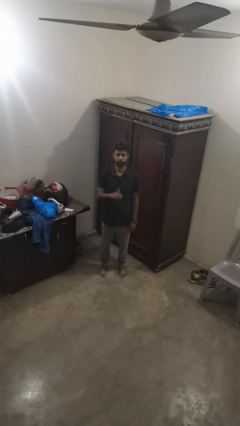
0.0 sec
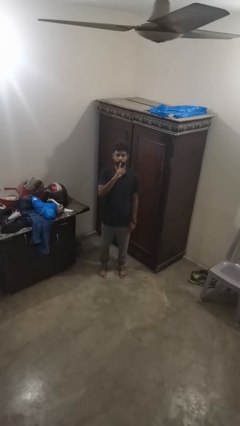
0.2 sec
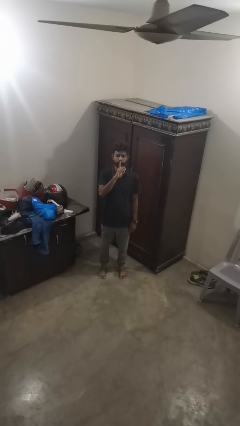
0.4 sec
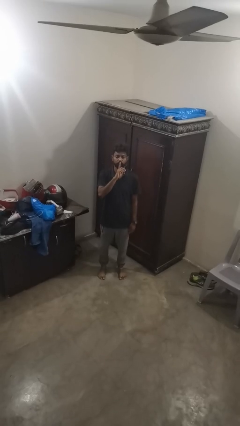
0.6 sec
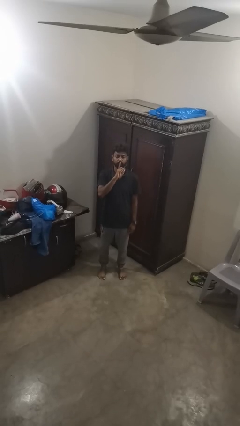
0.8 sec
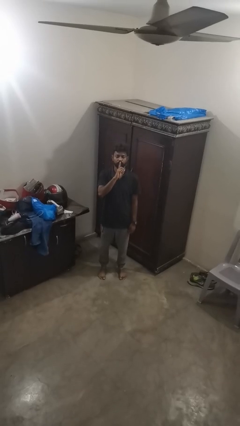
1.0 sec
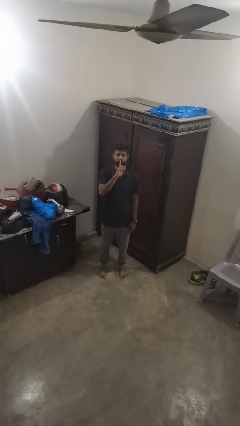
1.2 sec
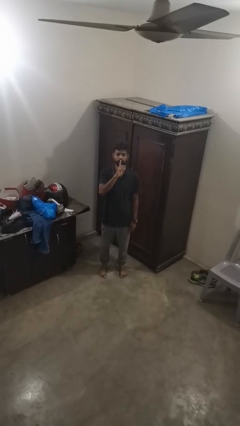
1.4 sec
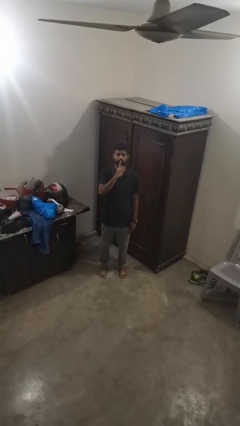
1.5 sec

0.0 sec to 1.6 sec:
person gestures be quiet

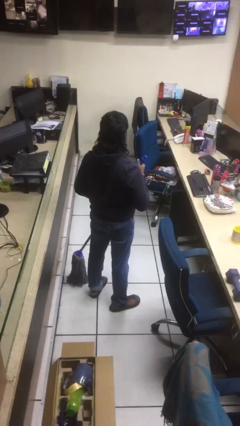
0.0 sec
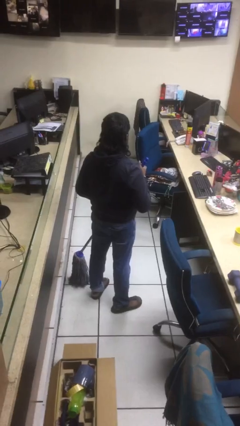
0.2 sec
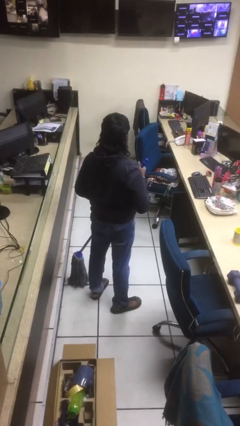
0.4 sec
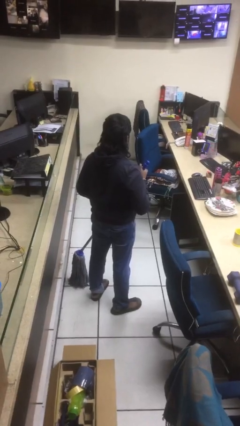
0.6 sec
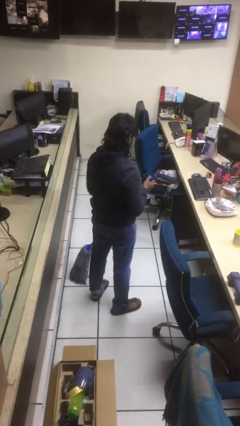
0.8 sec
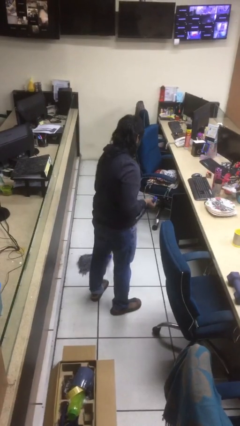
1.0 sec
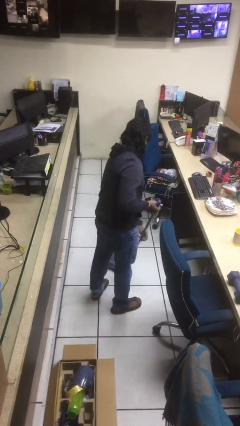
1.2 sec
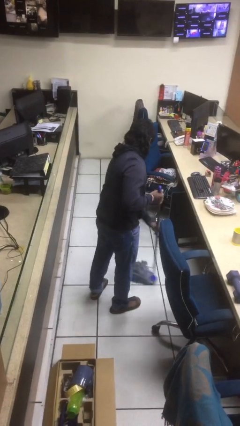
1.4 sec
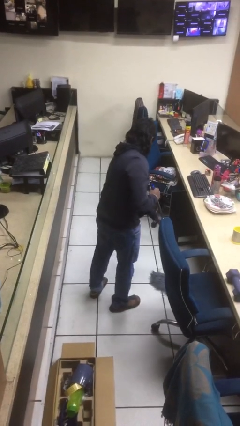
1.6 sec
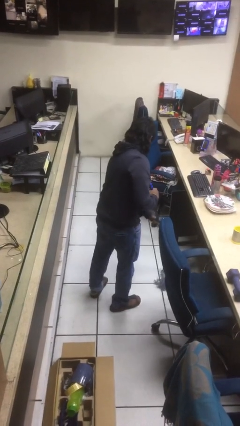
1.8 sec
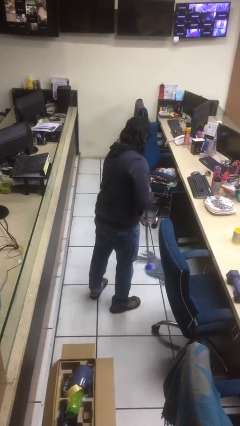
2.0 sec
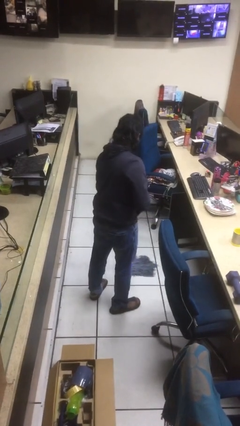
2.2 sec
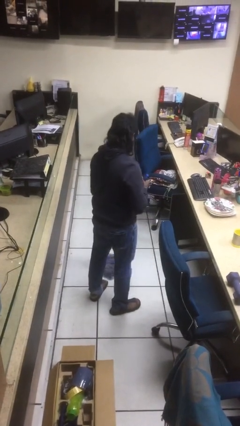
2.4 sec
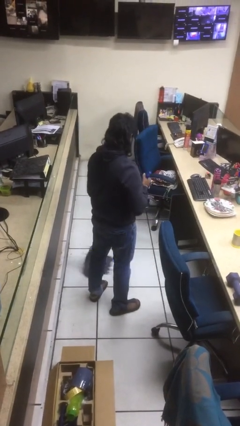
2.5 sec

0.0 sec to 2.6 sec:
person mops

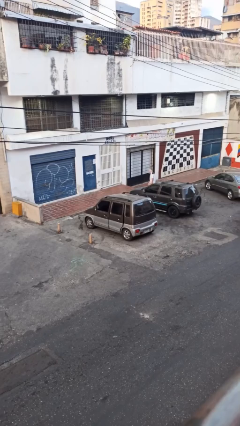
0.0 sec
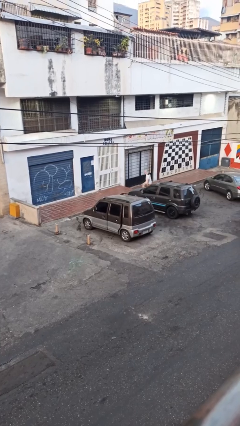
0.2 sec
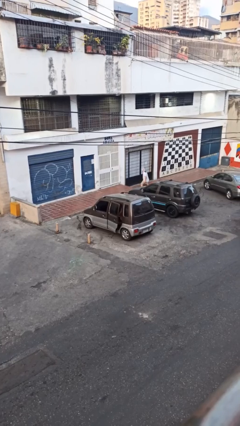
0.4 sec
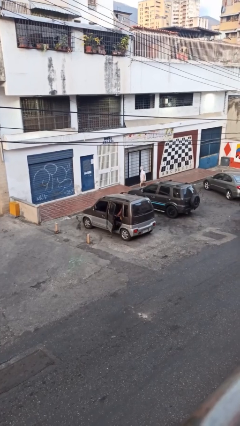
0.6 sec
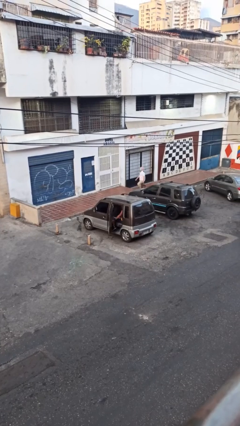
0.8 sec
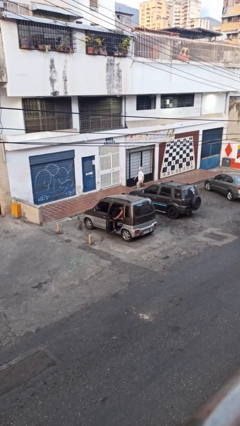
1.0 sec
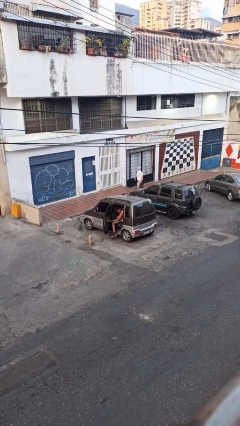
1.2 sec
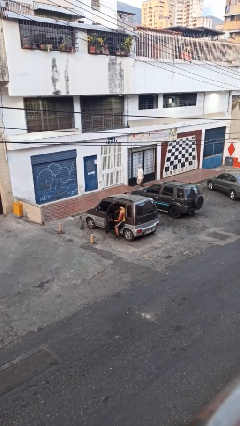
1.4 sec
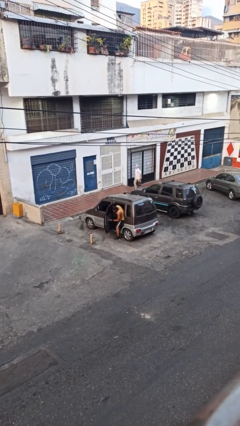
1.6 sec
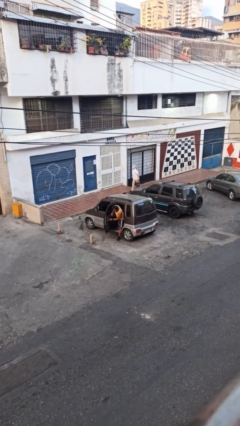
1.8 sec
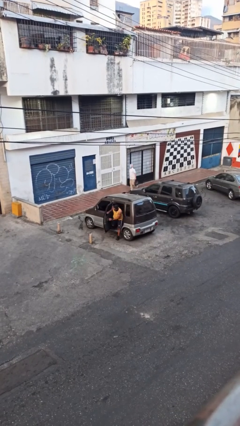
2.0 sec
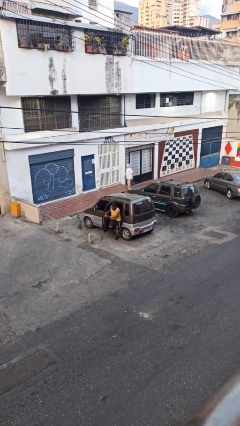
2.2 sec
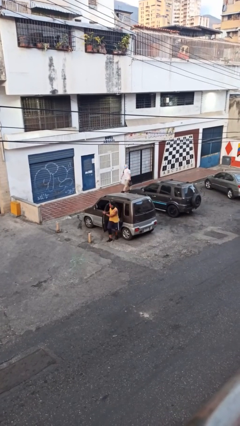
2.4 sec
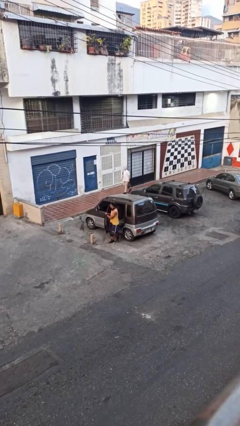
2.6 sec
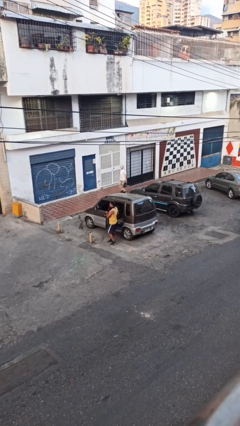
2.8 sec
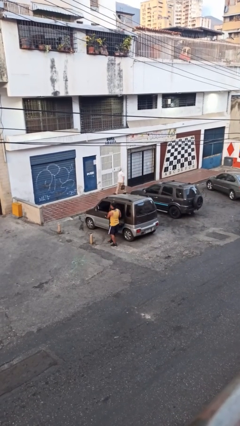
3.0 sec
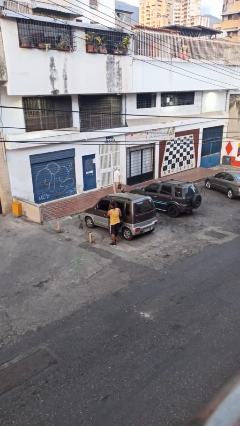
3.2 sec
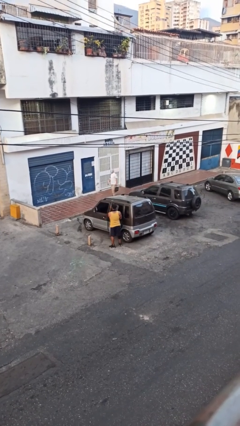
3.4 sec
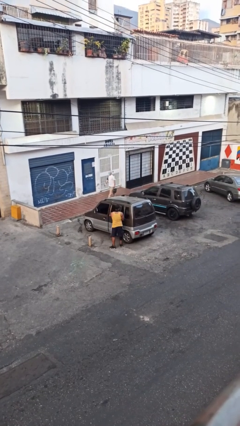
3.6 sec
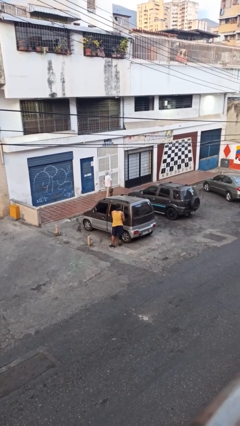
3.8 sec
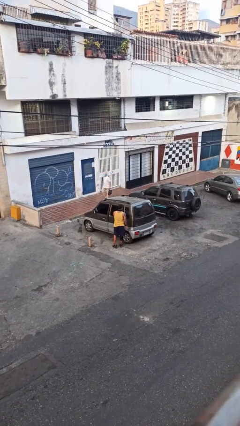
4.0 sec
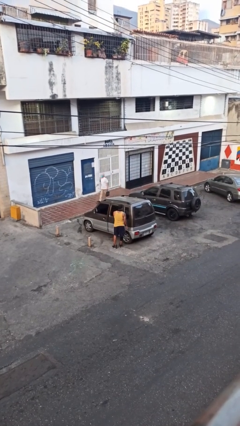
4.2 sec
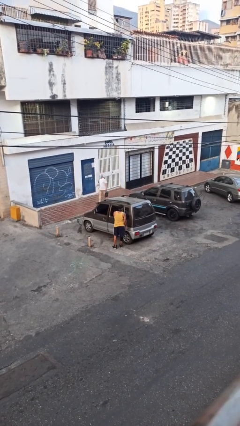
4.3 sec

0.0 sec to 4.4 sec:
car drops off person

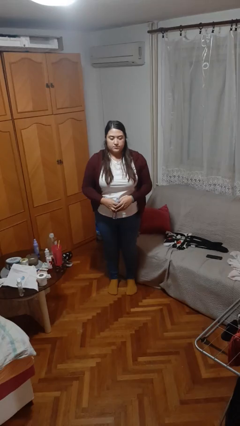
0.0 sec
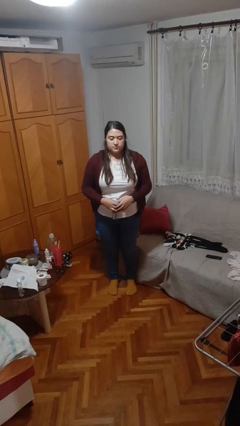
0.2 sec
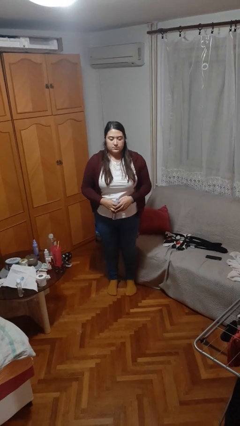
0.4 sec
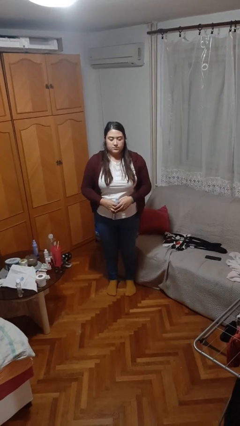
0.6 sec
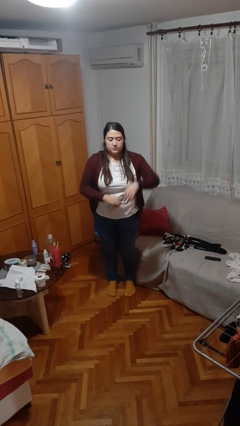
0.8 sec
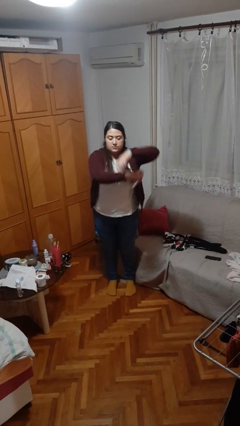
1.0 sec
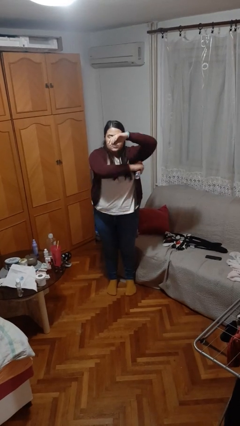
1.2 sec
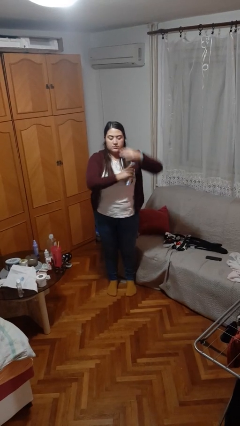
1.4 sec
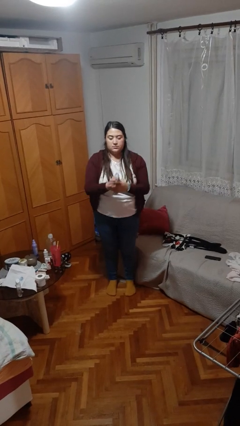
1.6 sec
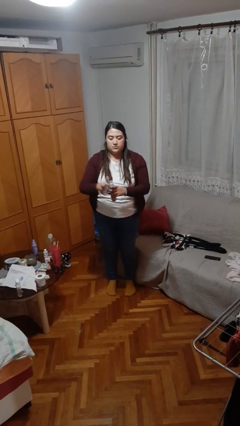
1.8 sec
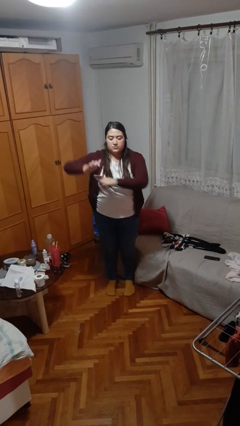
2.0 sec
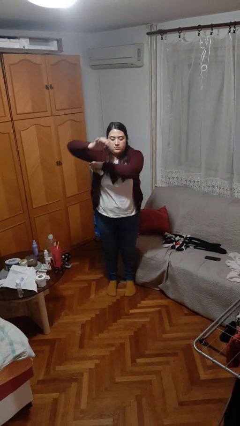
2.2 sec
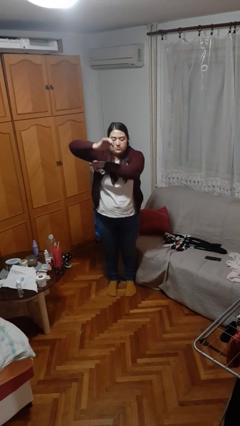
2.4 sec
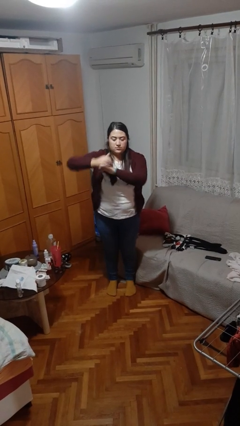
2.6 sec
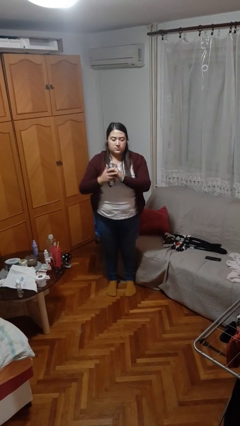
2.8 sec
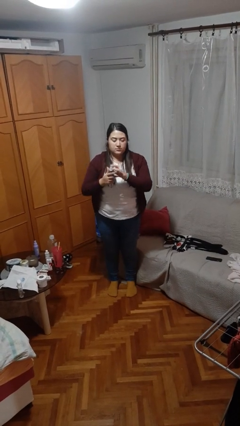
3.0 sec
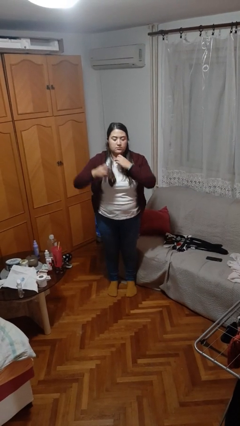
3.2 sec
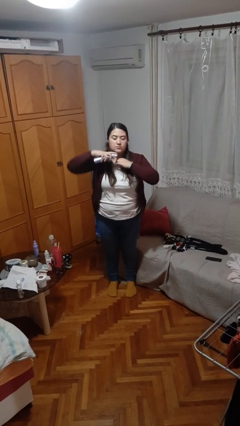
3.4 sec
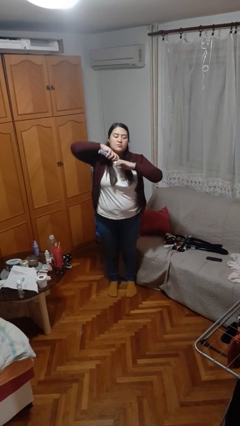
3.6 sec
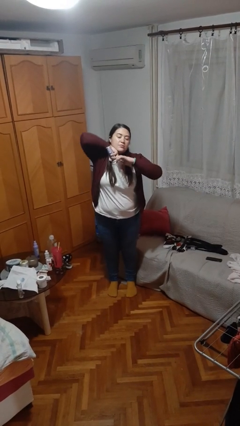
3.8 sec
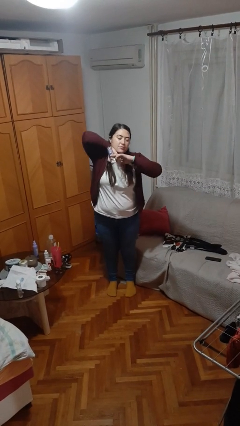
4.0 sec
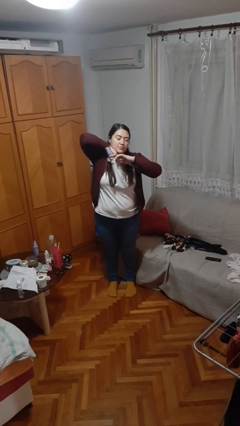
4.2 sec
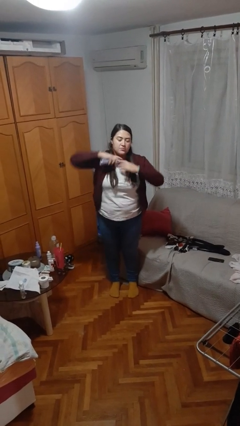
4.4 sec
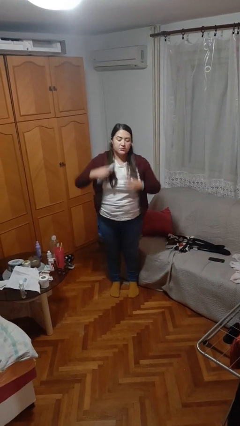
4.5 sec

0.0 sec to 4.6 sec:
person applies deodorant

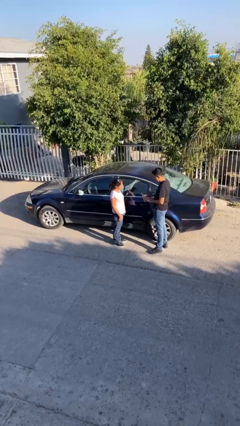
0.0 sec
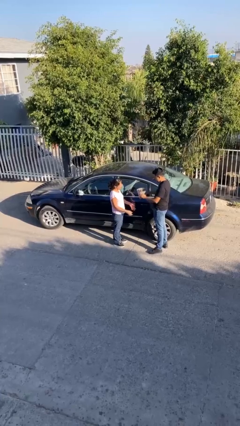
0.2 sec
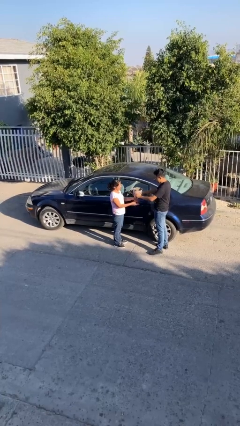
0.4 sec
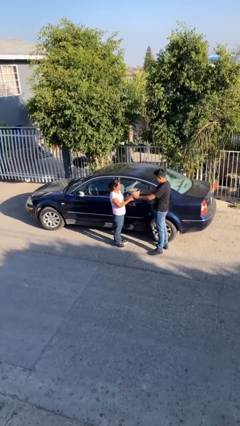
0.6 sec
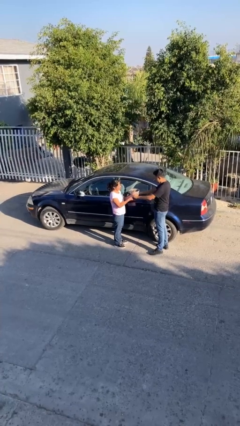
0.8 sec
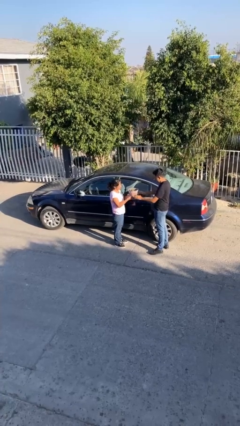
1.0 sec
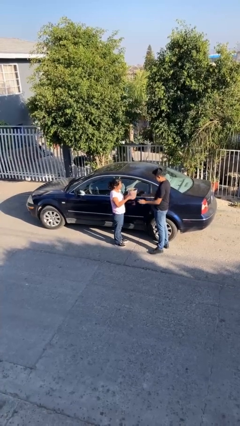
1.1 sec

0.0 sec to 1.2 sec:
person transfers object to person

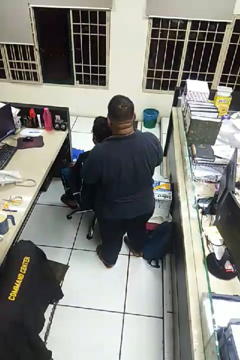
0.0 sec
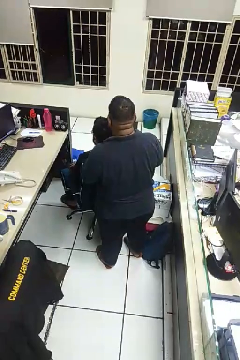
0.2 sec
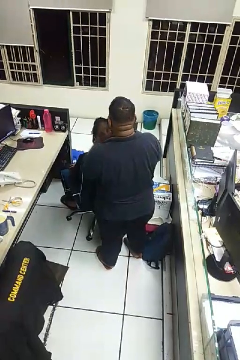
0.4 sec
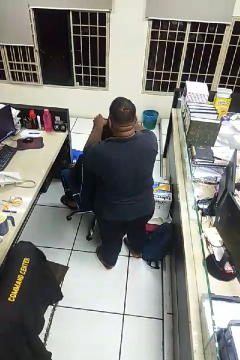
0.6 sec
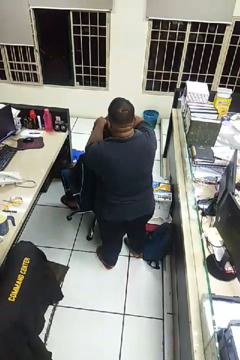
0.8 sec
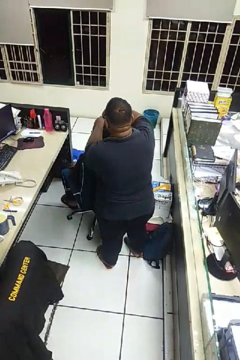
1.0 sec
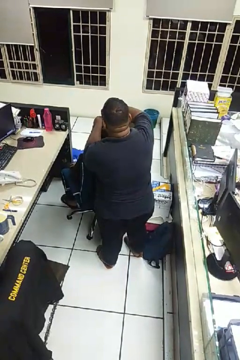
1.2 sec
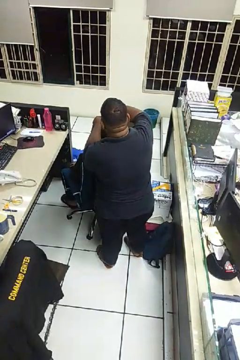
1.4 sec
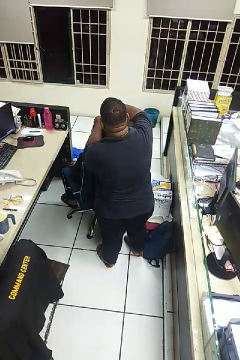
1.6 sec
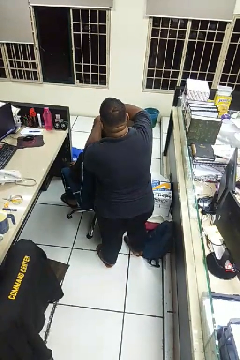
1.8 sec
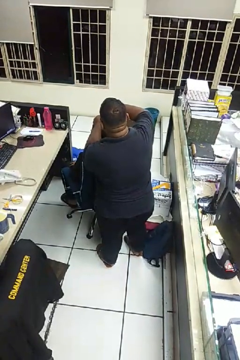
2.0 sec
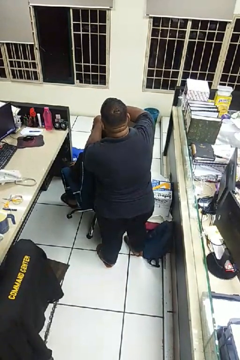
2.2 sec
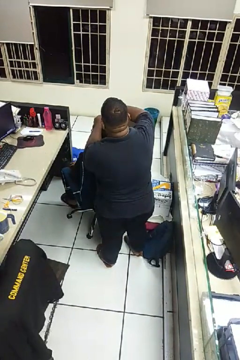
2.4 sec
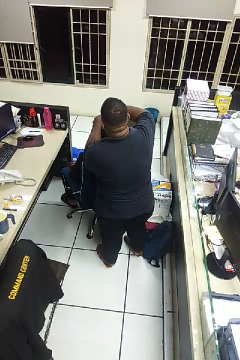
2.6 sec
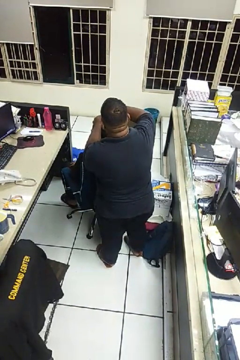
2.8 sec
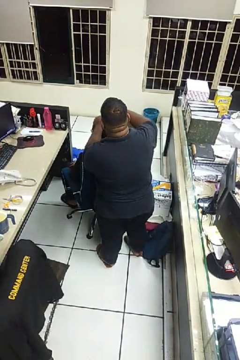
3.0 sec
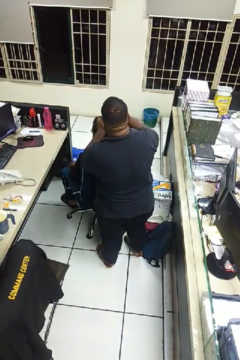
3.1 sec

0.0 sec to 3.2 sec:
person braids hair of person

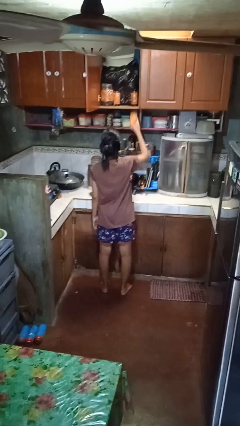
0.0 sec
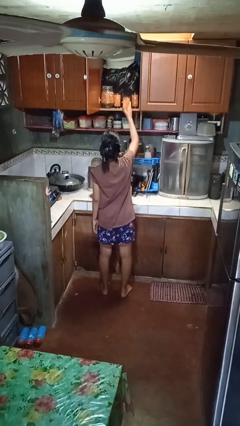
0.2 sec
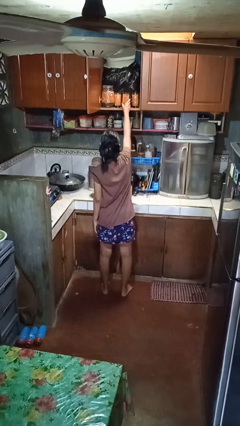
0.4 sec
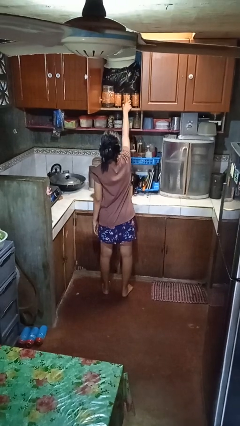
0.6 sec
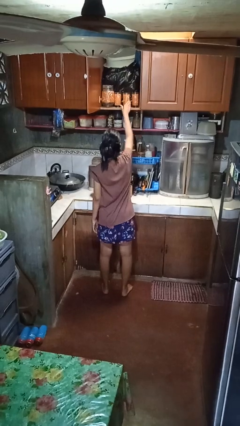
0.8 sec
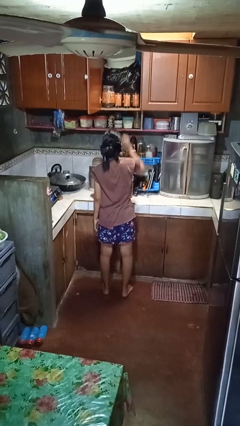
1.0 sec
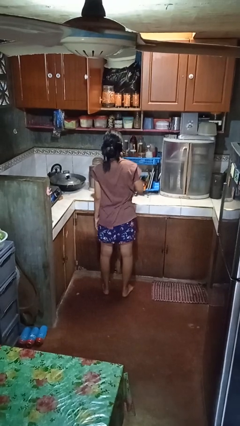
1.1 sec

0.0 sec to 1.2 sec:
person puts object in cabinet
